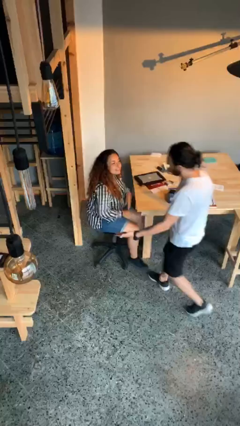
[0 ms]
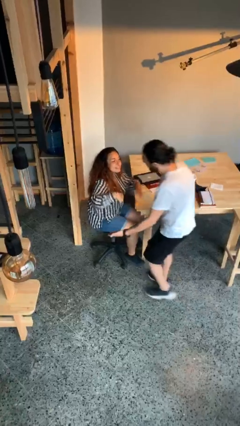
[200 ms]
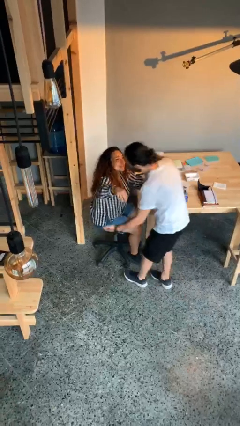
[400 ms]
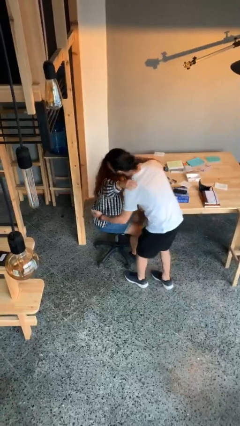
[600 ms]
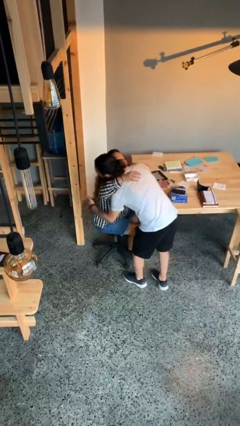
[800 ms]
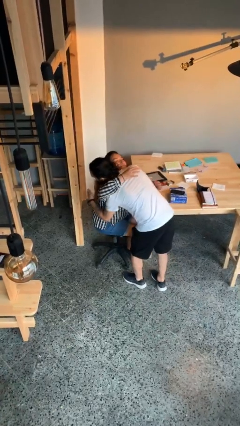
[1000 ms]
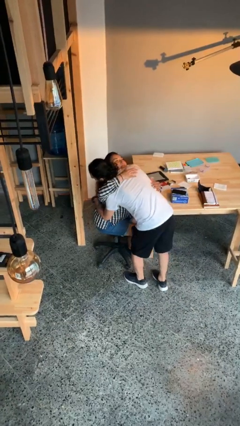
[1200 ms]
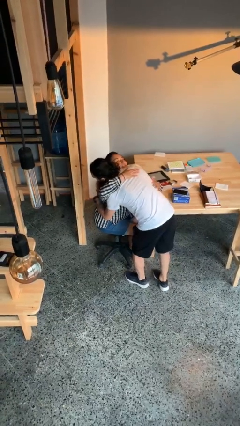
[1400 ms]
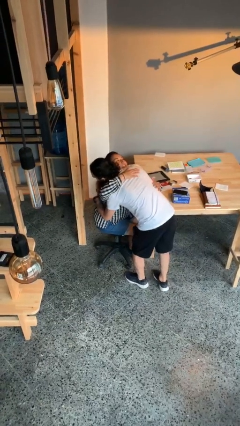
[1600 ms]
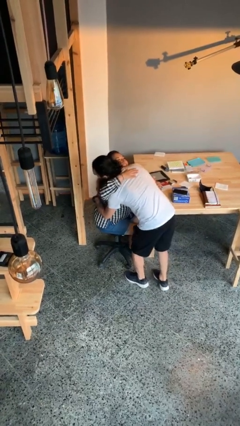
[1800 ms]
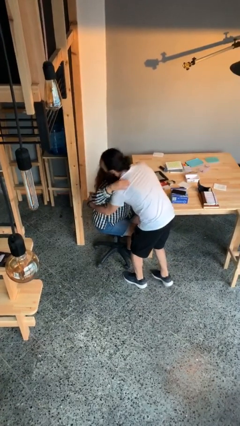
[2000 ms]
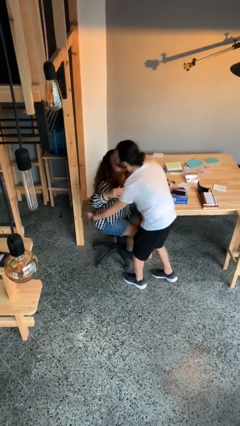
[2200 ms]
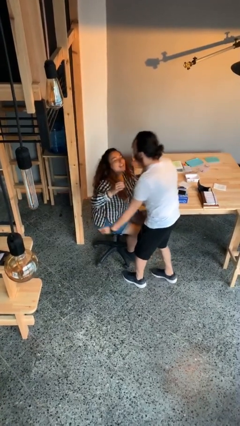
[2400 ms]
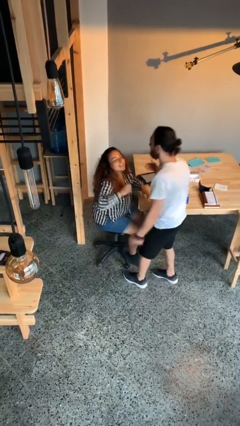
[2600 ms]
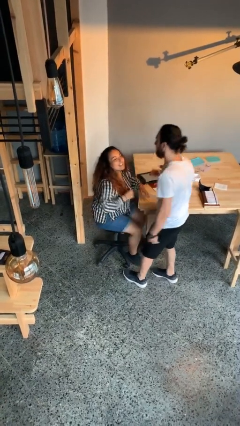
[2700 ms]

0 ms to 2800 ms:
person embraces person

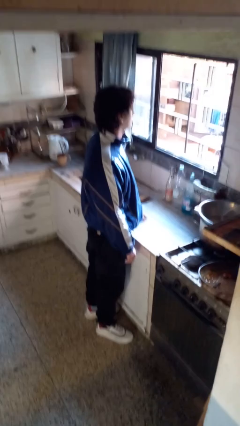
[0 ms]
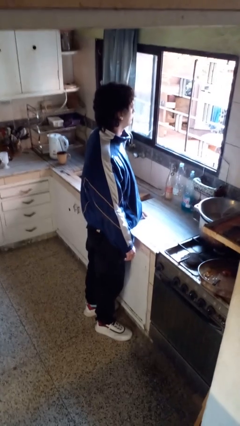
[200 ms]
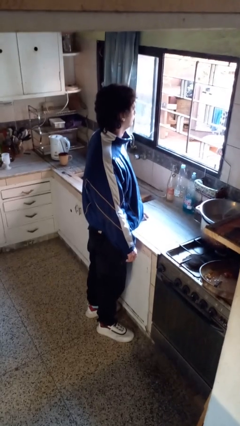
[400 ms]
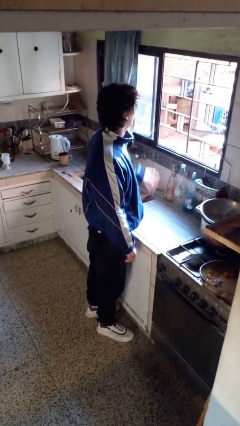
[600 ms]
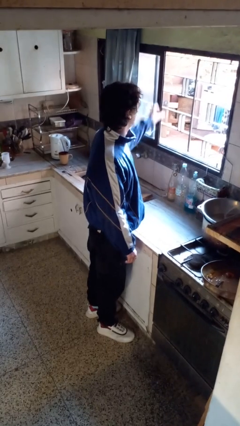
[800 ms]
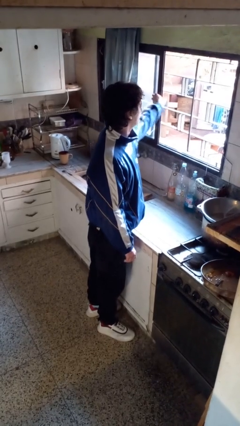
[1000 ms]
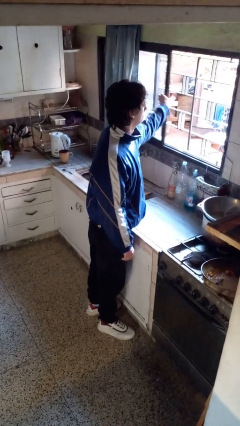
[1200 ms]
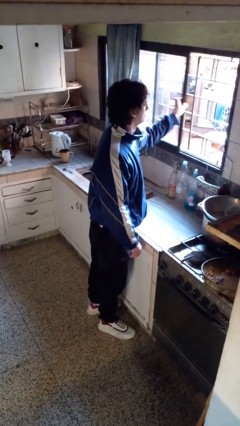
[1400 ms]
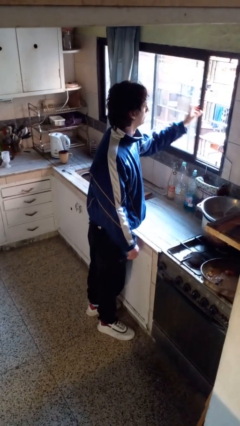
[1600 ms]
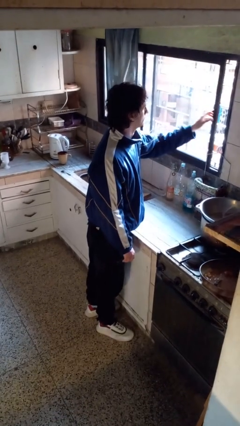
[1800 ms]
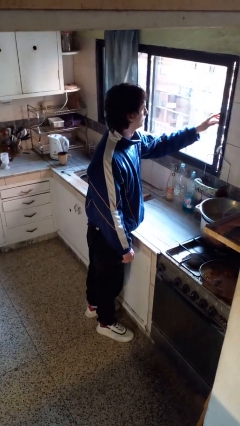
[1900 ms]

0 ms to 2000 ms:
person closes home window

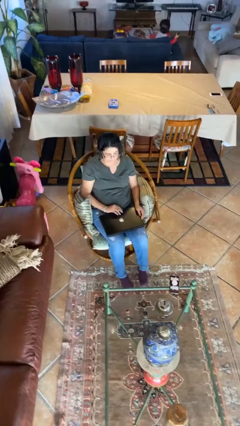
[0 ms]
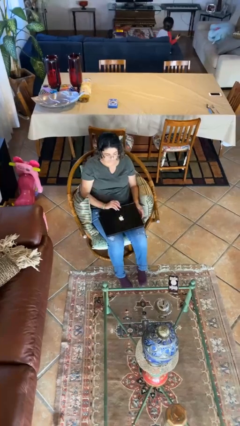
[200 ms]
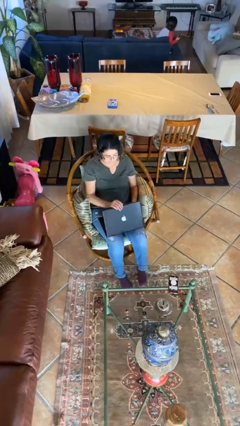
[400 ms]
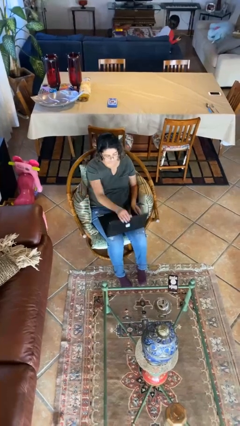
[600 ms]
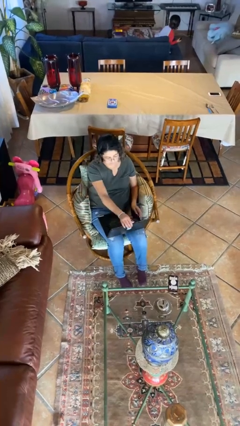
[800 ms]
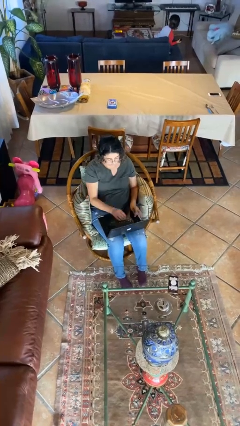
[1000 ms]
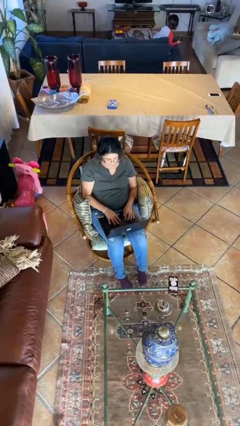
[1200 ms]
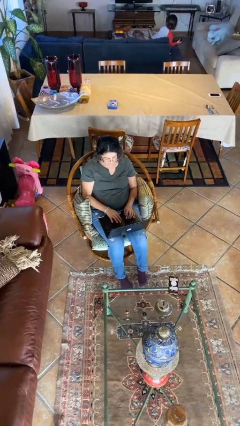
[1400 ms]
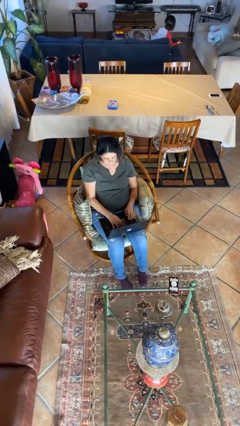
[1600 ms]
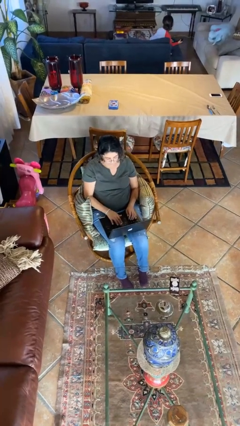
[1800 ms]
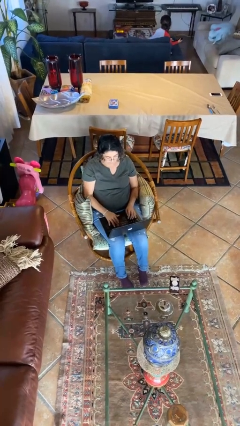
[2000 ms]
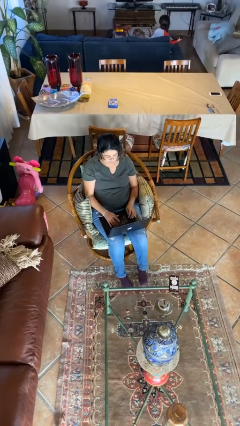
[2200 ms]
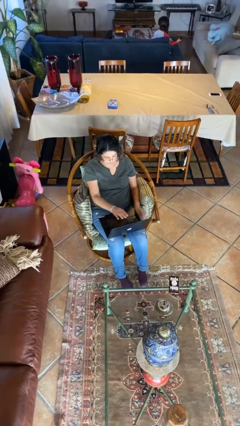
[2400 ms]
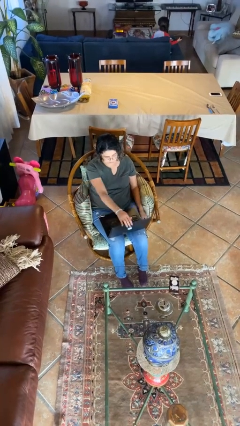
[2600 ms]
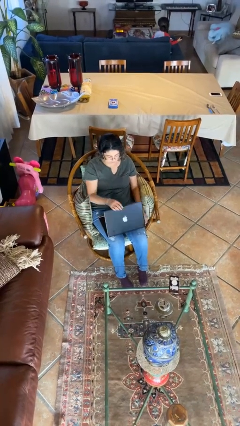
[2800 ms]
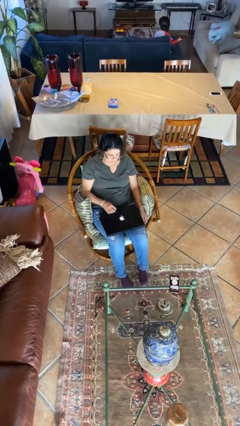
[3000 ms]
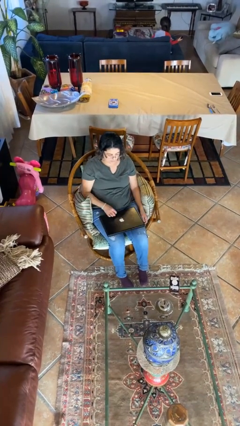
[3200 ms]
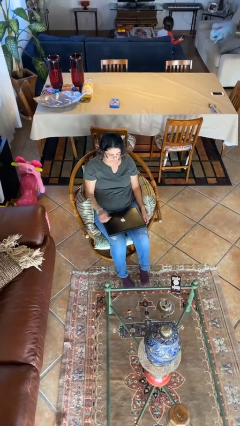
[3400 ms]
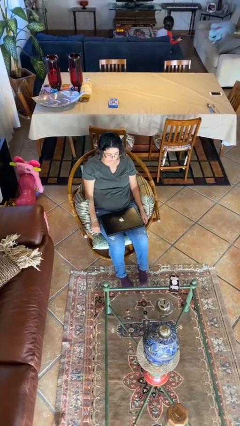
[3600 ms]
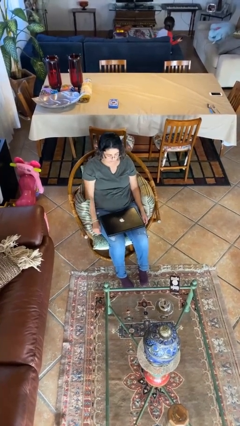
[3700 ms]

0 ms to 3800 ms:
person interacts with laptop

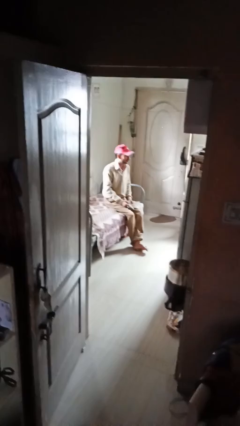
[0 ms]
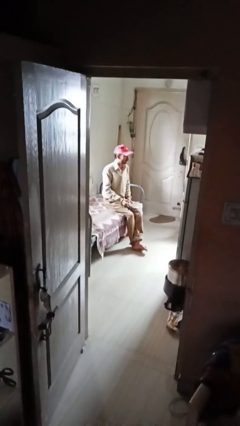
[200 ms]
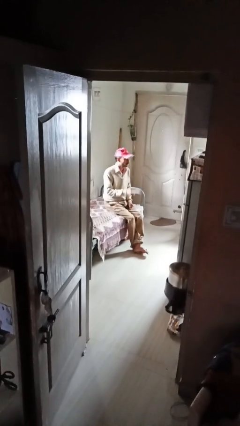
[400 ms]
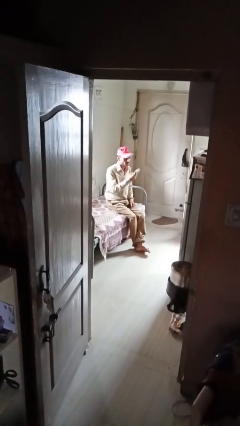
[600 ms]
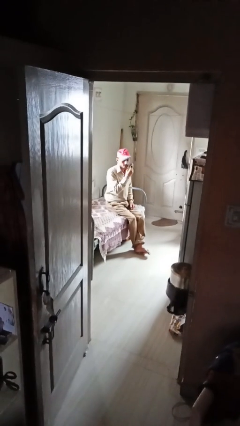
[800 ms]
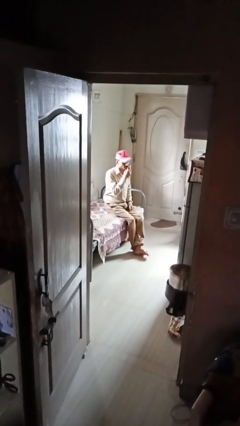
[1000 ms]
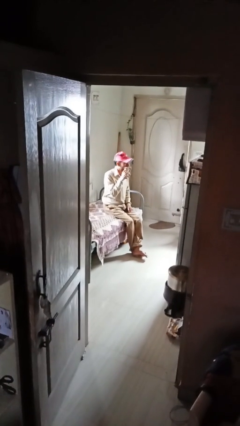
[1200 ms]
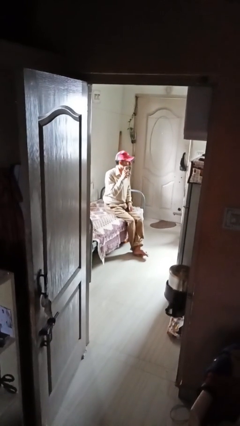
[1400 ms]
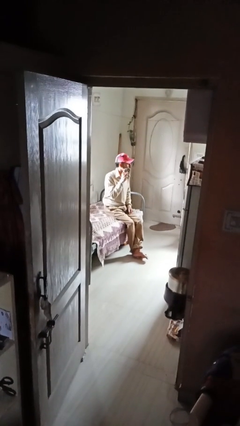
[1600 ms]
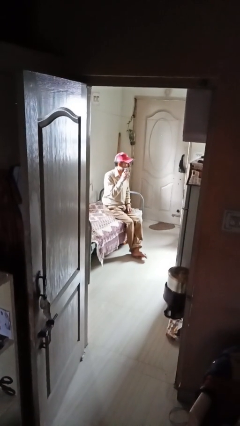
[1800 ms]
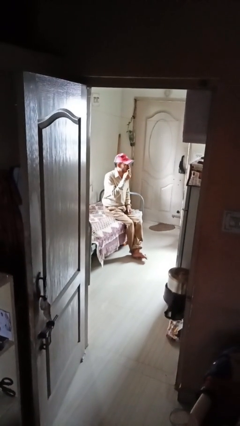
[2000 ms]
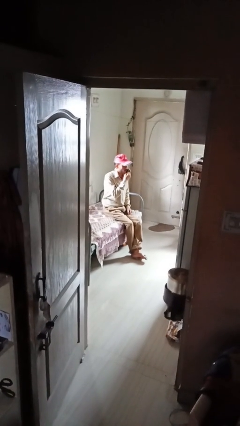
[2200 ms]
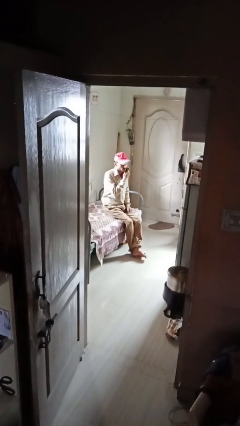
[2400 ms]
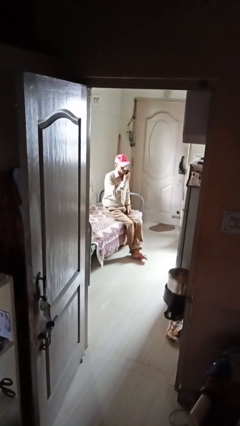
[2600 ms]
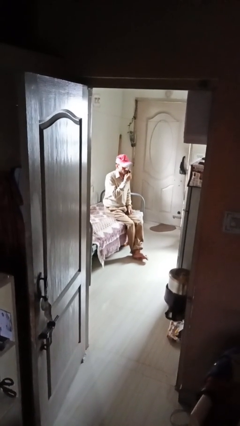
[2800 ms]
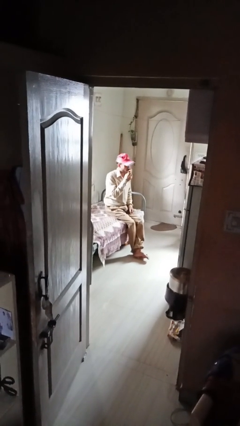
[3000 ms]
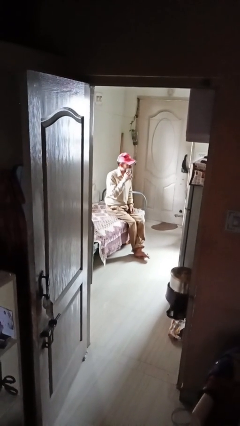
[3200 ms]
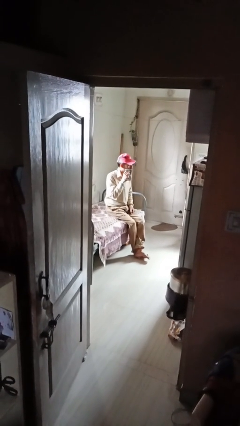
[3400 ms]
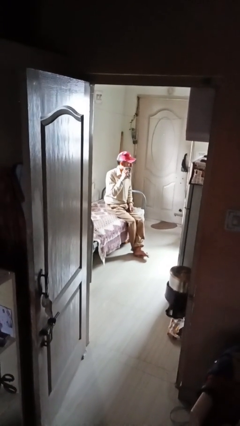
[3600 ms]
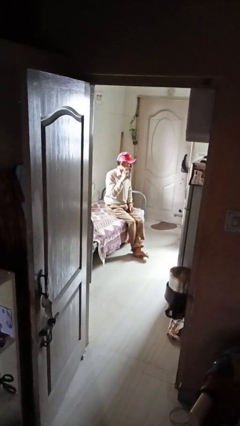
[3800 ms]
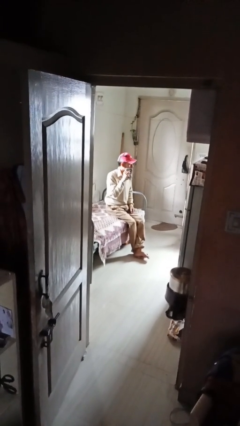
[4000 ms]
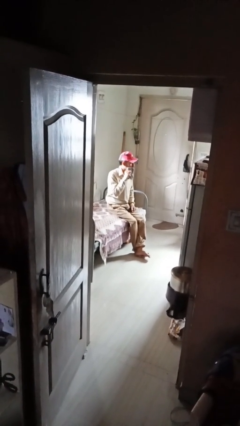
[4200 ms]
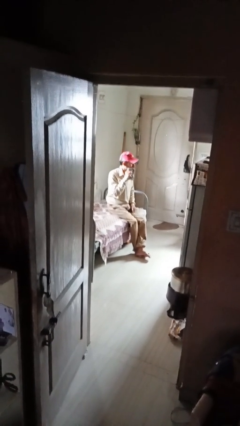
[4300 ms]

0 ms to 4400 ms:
person wipes mouth with napkin

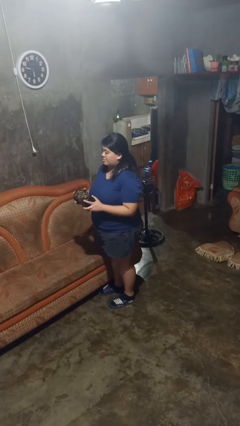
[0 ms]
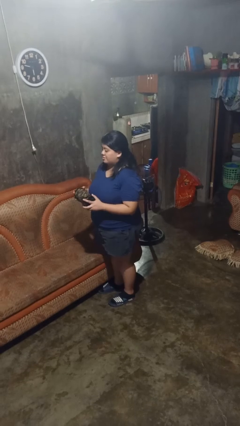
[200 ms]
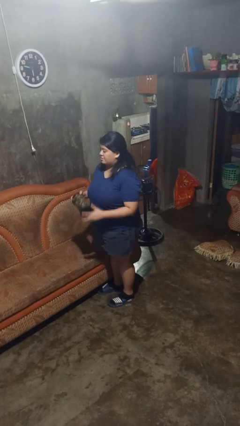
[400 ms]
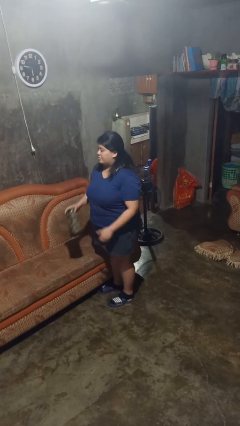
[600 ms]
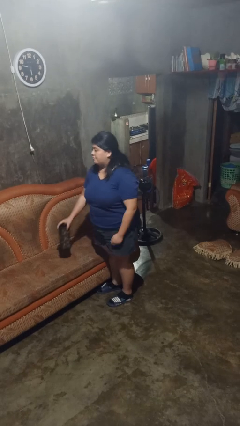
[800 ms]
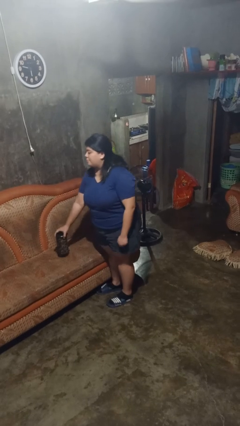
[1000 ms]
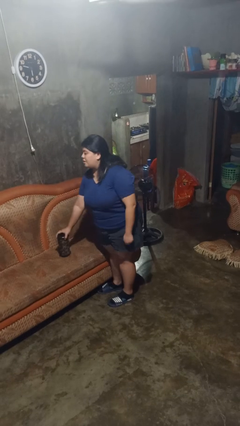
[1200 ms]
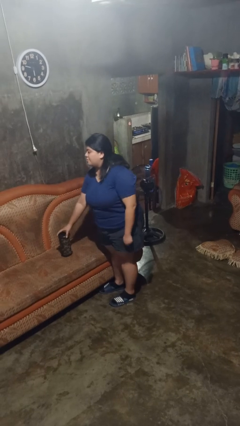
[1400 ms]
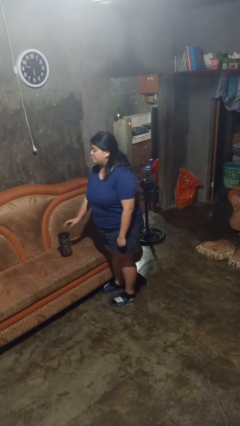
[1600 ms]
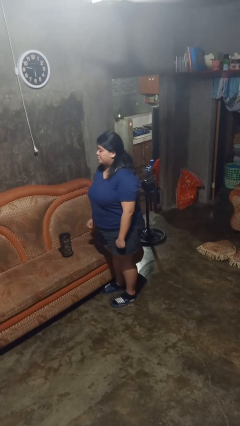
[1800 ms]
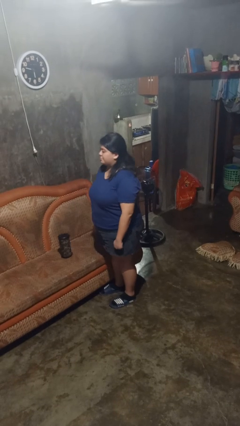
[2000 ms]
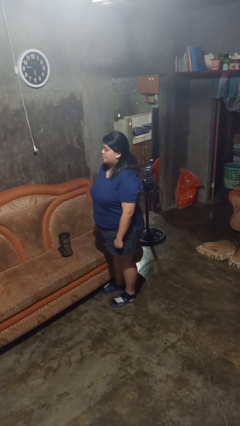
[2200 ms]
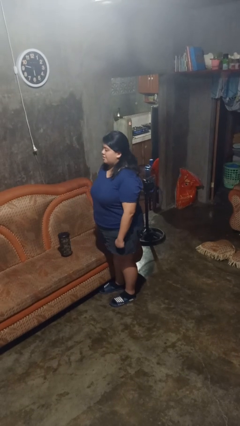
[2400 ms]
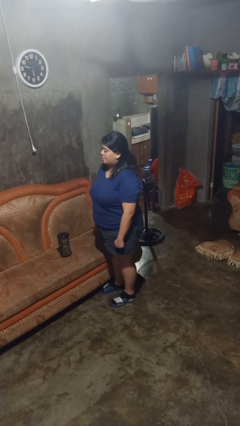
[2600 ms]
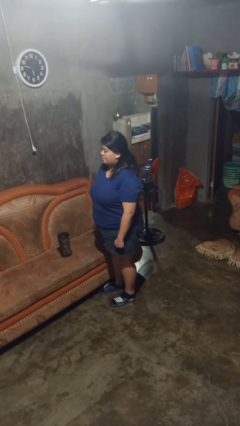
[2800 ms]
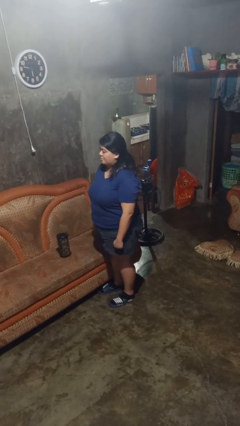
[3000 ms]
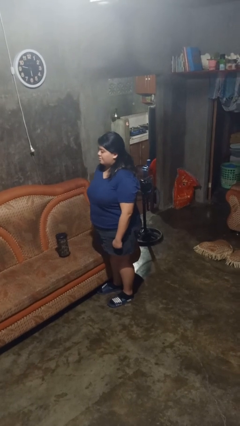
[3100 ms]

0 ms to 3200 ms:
person puts down object on couch

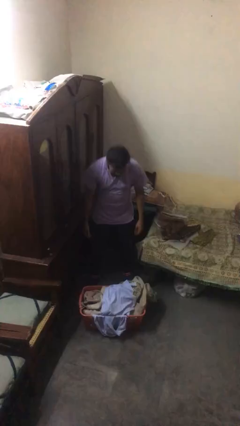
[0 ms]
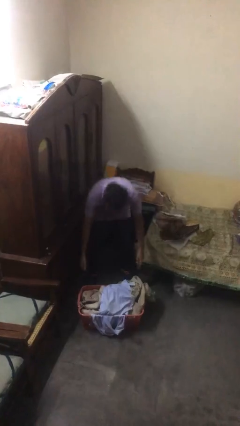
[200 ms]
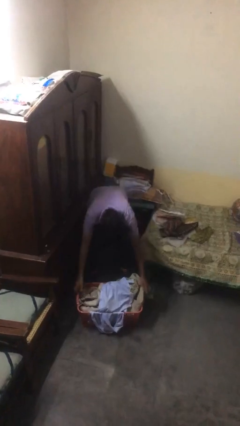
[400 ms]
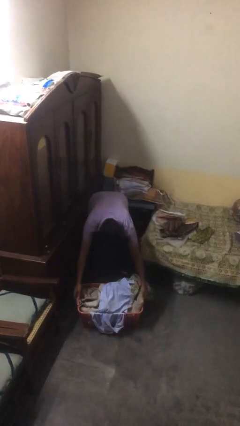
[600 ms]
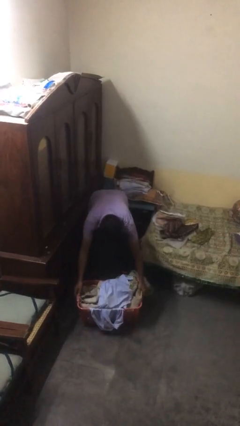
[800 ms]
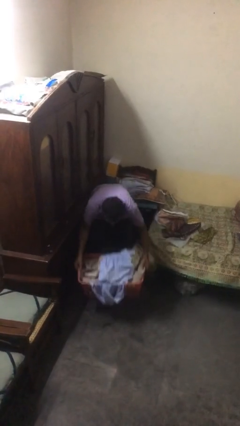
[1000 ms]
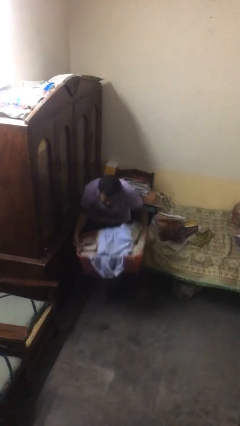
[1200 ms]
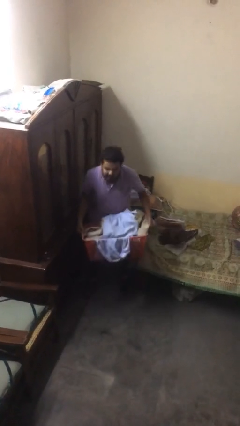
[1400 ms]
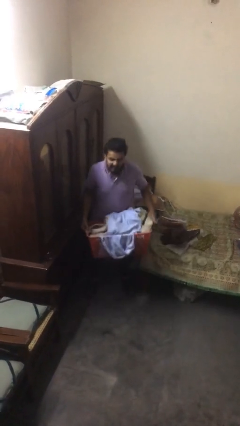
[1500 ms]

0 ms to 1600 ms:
person picks up object from floor
